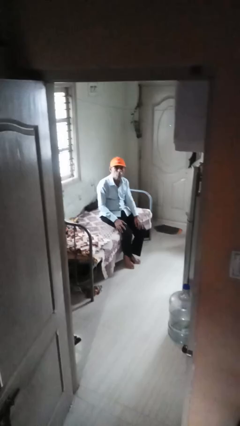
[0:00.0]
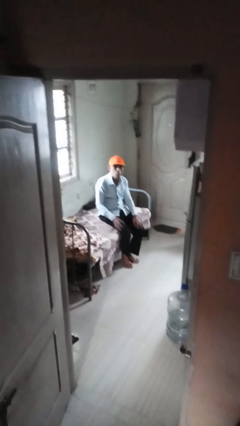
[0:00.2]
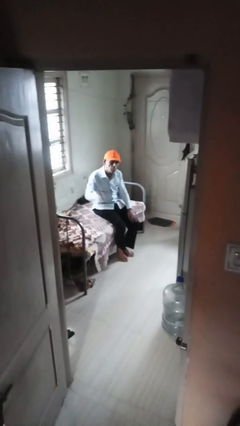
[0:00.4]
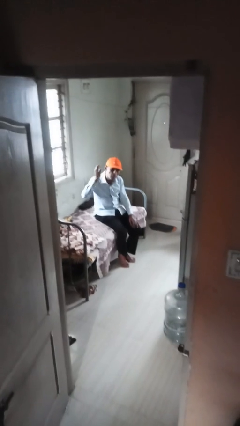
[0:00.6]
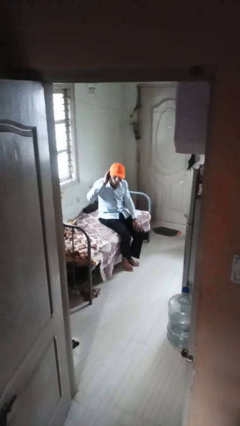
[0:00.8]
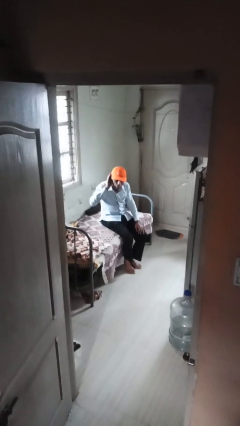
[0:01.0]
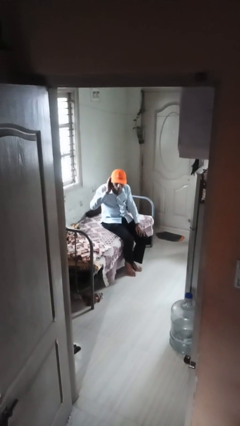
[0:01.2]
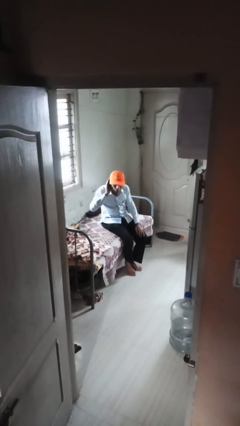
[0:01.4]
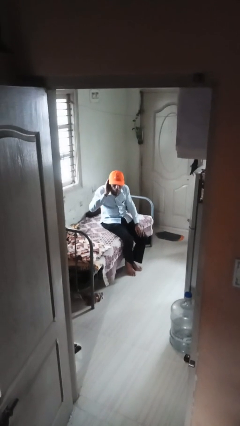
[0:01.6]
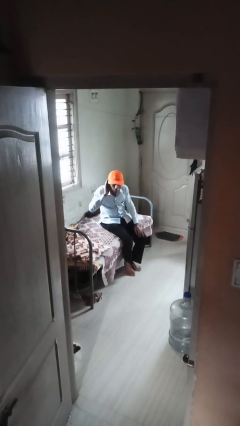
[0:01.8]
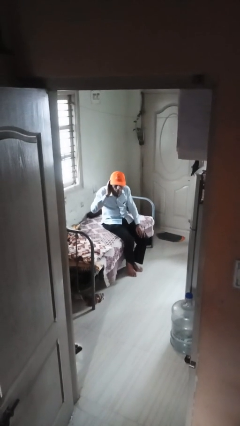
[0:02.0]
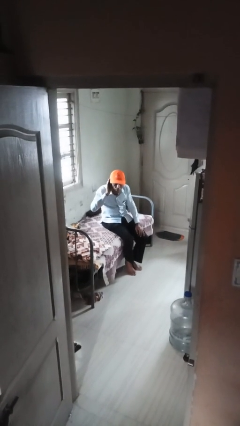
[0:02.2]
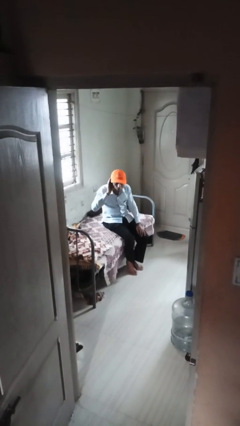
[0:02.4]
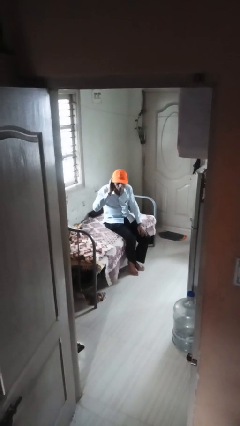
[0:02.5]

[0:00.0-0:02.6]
person gestures listen closely

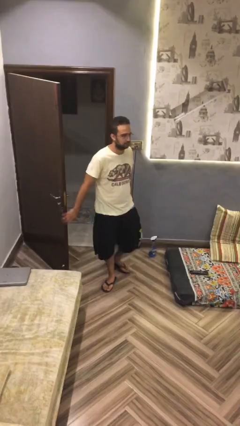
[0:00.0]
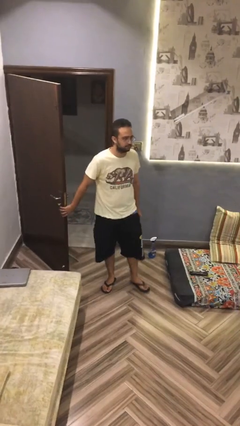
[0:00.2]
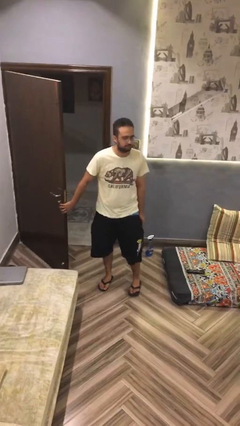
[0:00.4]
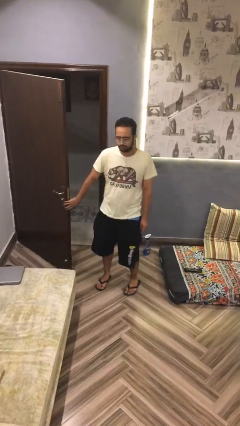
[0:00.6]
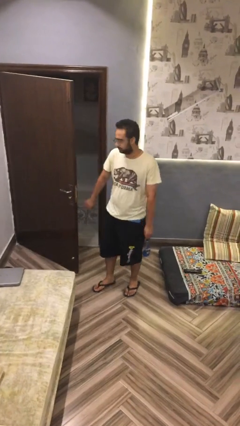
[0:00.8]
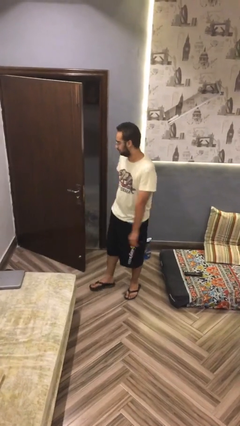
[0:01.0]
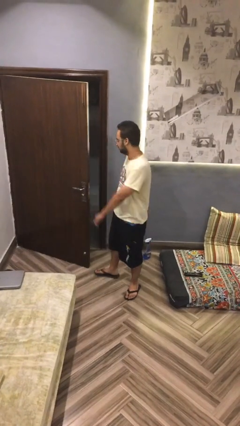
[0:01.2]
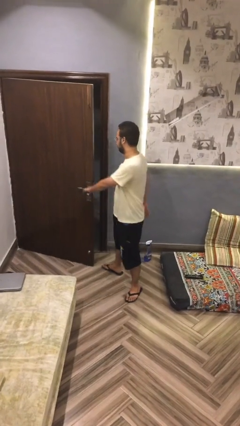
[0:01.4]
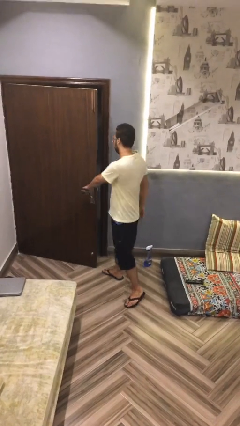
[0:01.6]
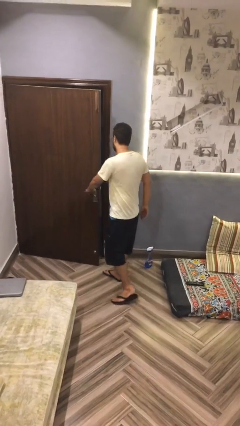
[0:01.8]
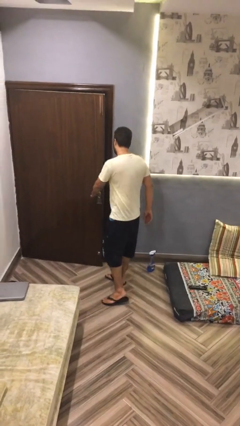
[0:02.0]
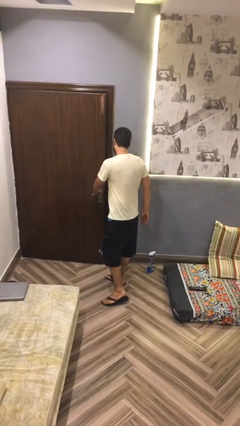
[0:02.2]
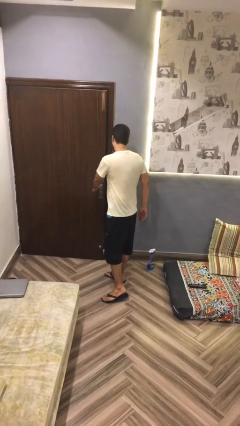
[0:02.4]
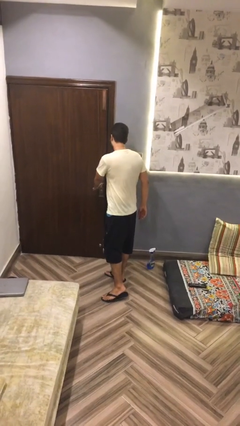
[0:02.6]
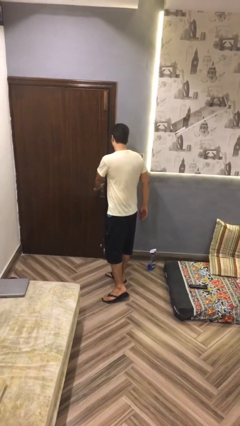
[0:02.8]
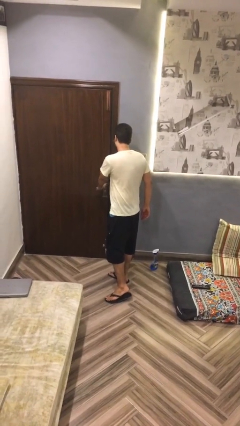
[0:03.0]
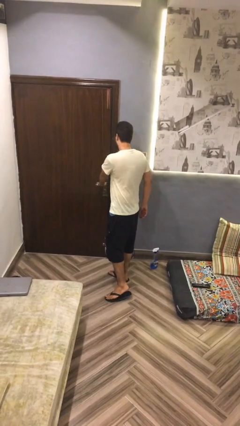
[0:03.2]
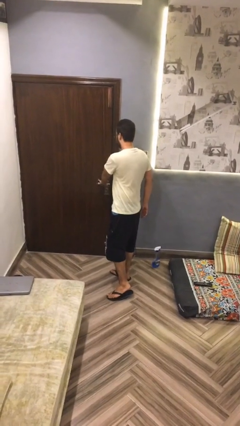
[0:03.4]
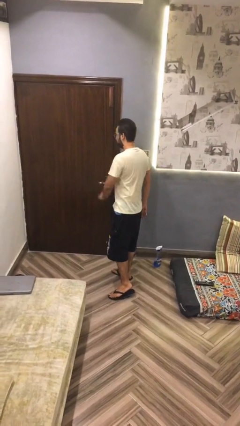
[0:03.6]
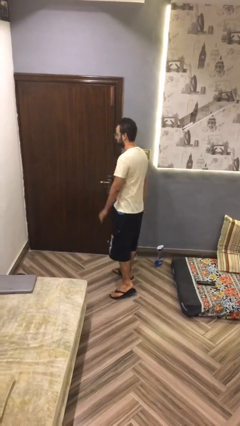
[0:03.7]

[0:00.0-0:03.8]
person closes facility door

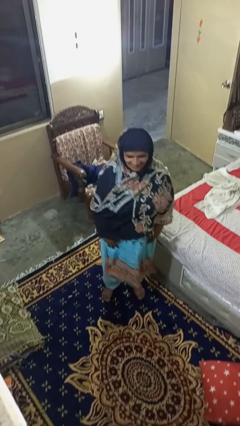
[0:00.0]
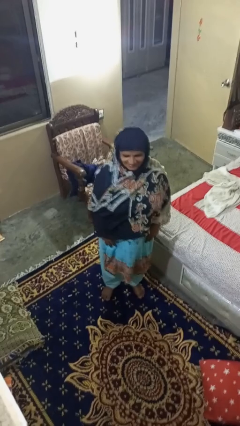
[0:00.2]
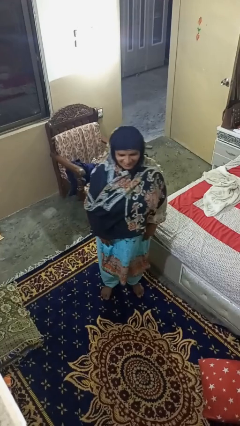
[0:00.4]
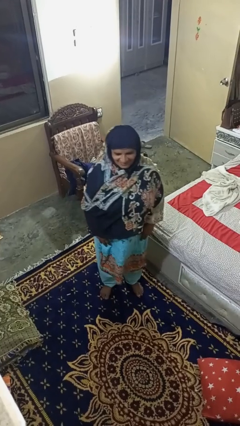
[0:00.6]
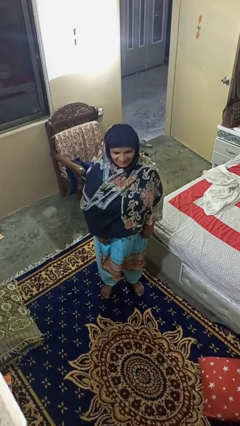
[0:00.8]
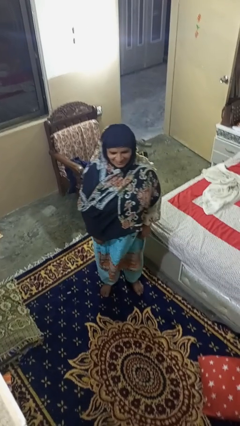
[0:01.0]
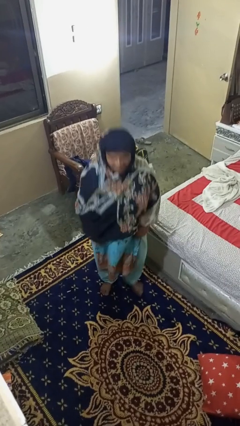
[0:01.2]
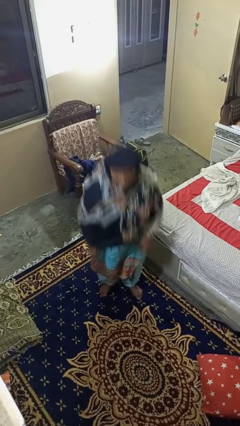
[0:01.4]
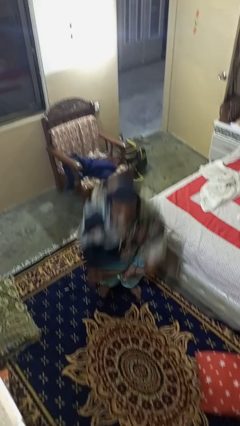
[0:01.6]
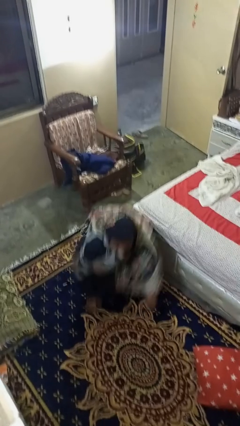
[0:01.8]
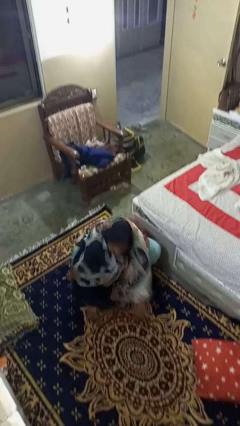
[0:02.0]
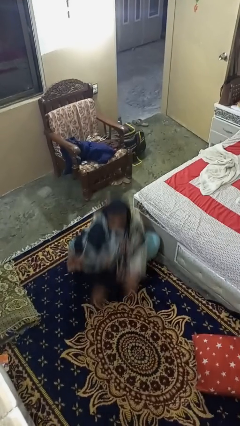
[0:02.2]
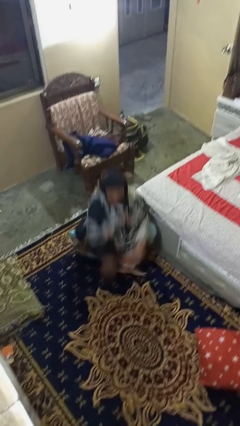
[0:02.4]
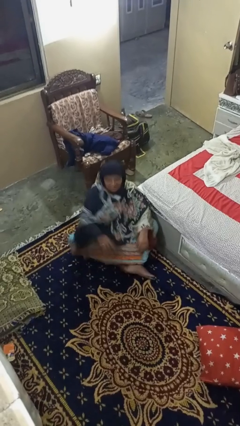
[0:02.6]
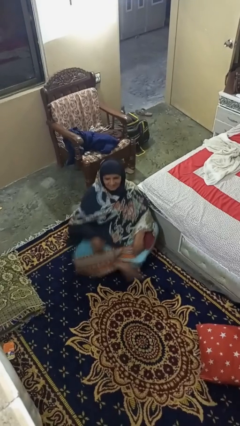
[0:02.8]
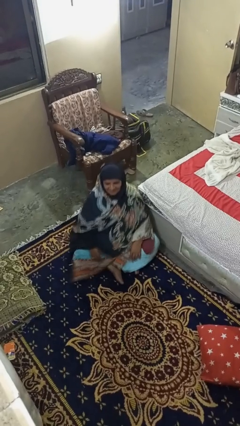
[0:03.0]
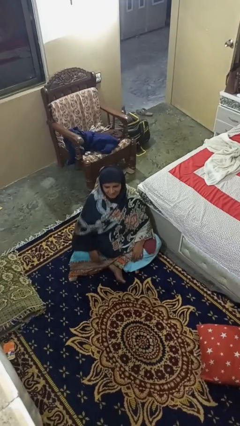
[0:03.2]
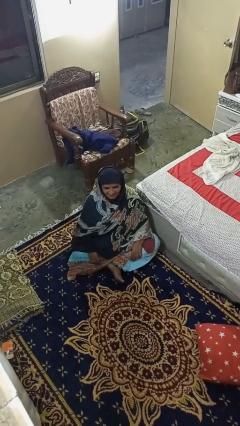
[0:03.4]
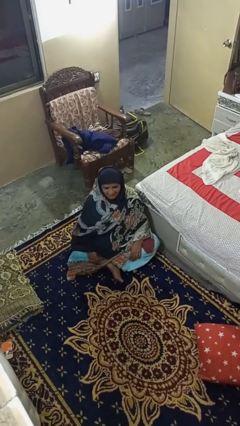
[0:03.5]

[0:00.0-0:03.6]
person sits crisscross

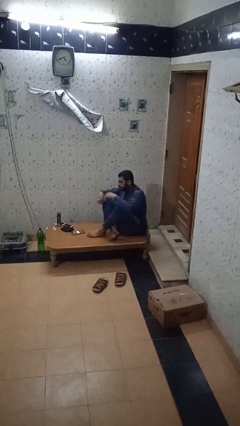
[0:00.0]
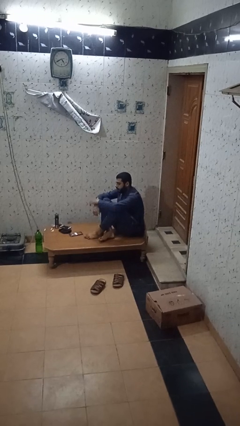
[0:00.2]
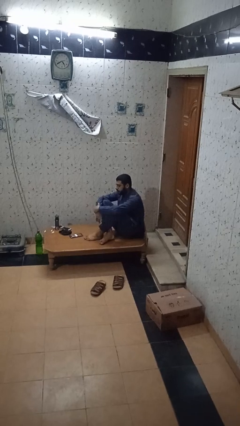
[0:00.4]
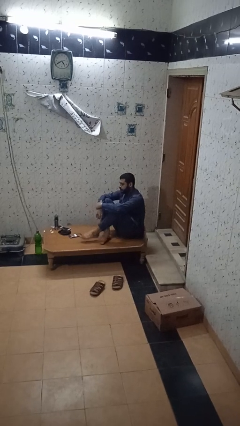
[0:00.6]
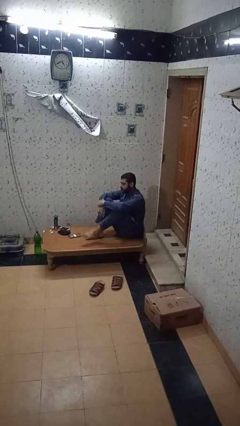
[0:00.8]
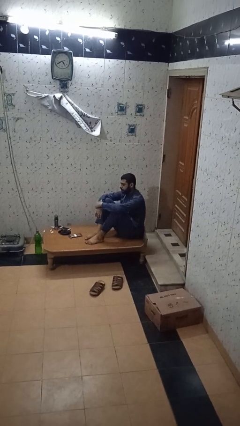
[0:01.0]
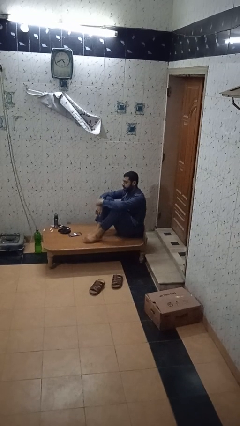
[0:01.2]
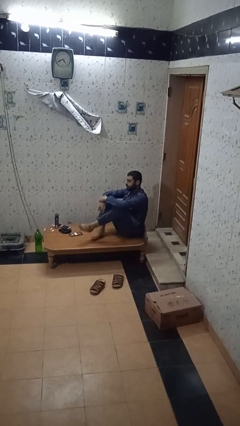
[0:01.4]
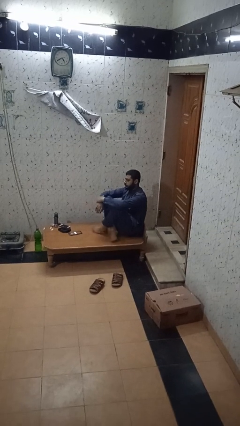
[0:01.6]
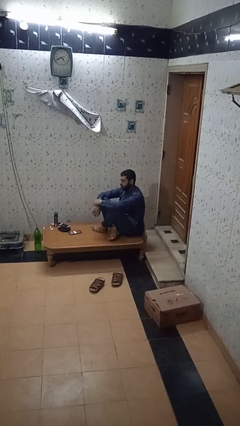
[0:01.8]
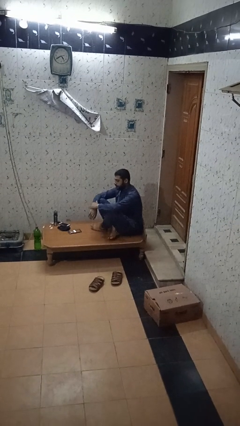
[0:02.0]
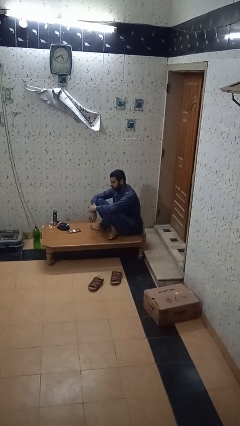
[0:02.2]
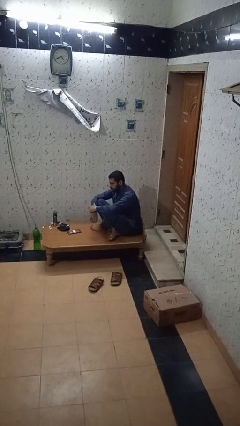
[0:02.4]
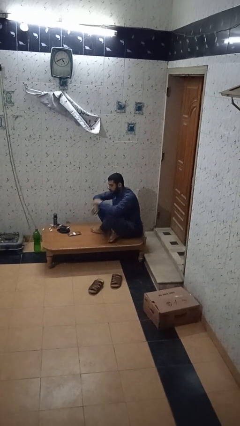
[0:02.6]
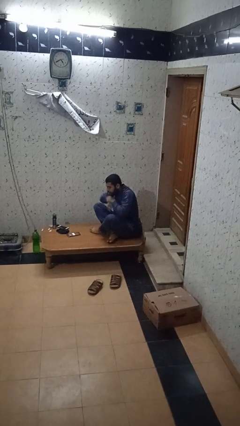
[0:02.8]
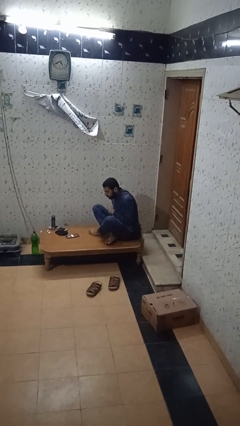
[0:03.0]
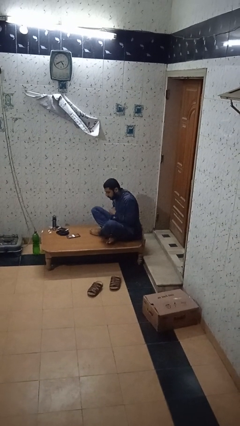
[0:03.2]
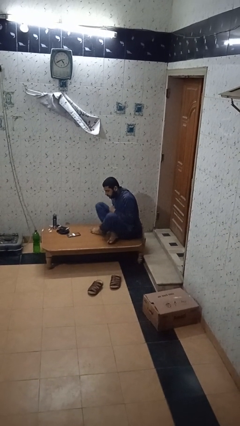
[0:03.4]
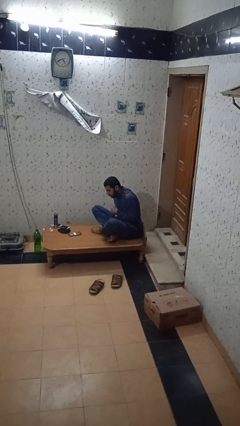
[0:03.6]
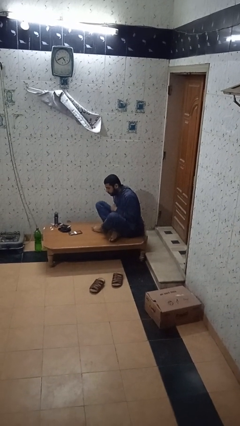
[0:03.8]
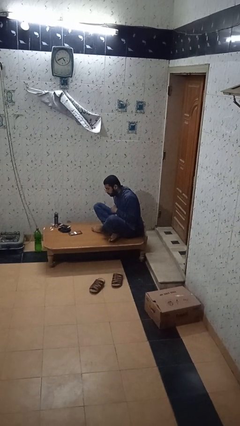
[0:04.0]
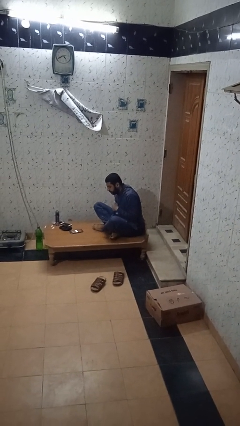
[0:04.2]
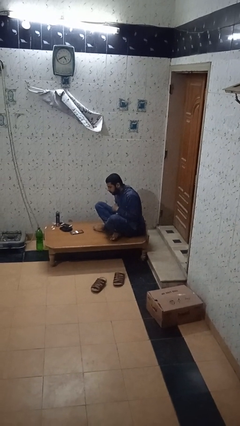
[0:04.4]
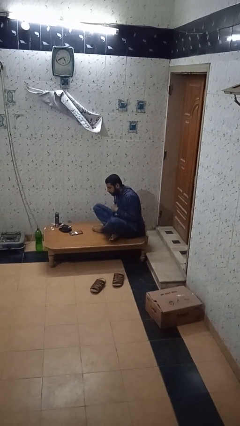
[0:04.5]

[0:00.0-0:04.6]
person crosses legs

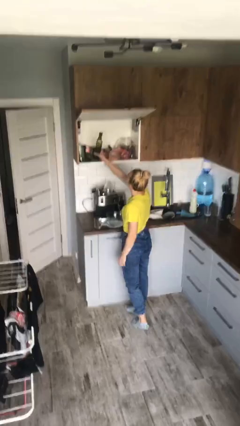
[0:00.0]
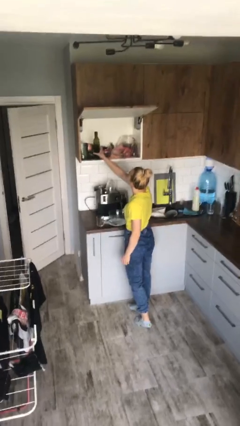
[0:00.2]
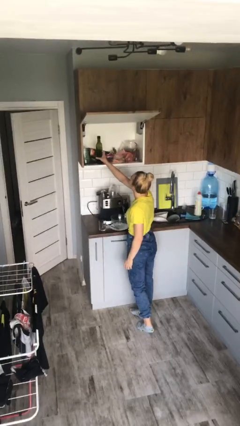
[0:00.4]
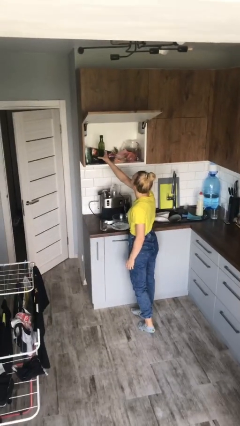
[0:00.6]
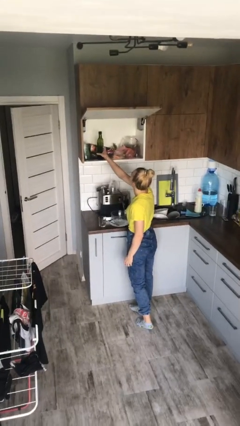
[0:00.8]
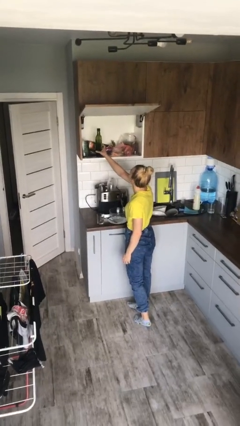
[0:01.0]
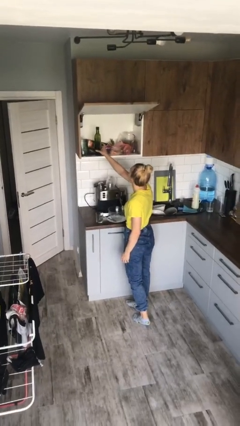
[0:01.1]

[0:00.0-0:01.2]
person puts down object on shelf

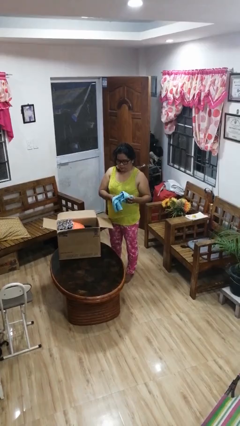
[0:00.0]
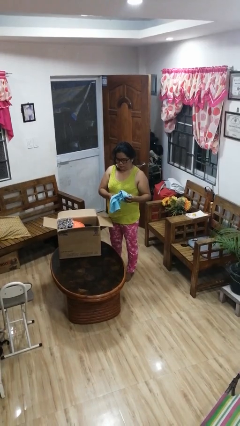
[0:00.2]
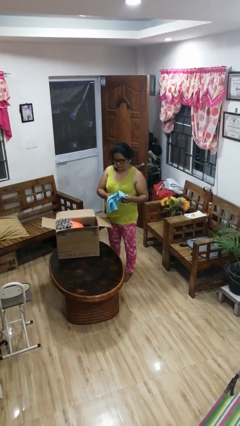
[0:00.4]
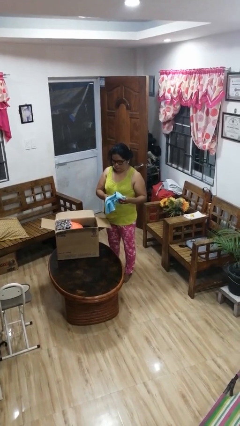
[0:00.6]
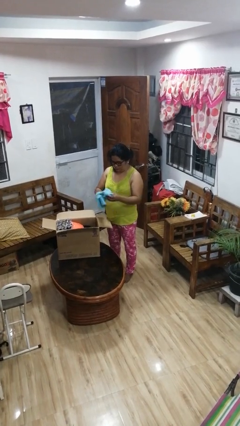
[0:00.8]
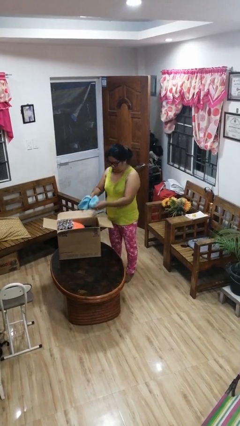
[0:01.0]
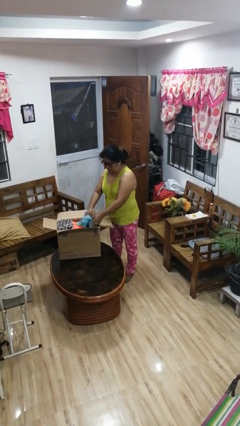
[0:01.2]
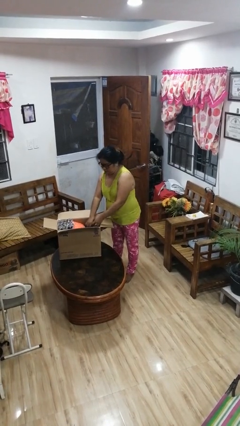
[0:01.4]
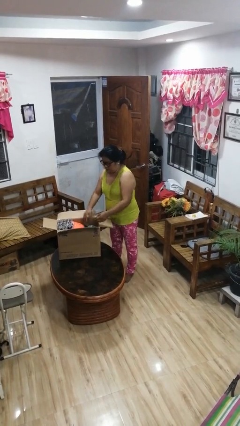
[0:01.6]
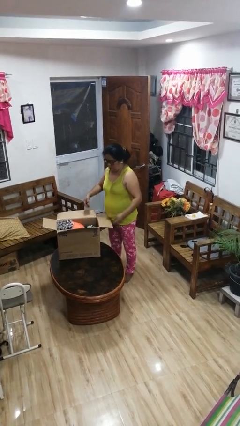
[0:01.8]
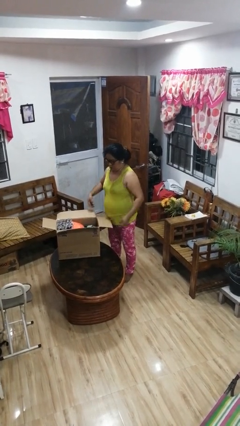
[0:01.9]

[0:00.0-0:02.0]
person puts object into box
